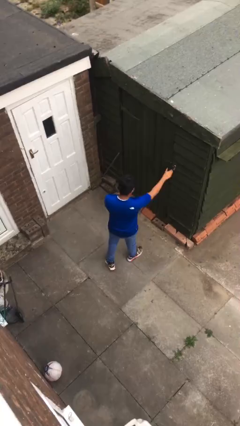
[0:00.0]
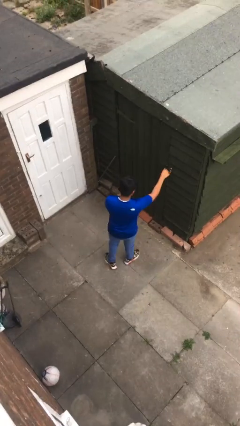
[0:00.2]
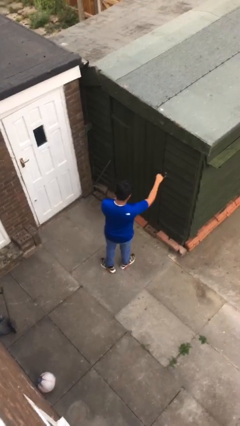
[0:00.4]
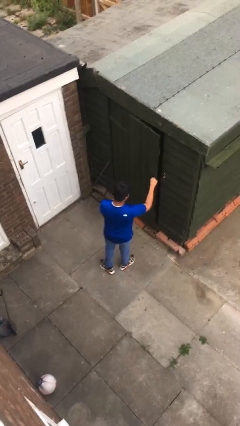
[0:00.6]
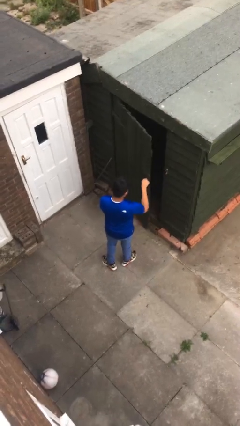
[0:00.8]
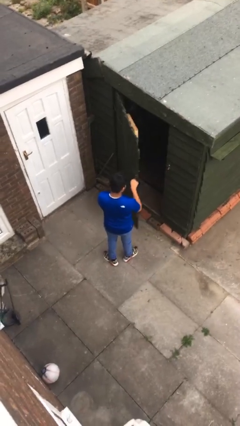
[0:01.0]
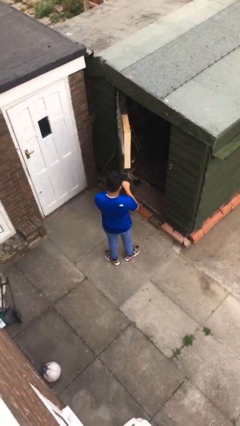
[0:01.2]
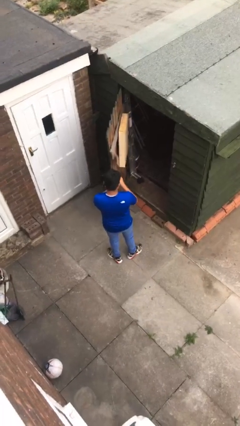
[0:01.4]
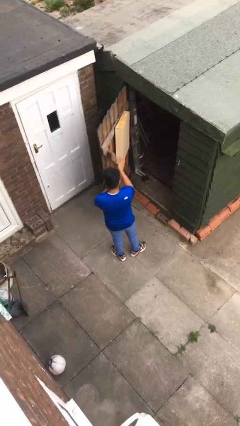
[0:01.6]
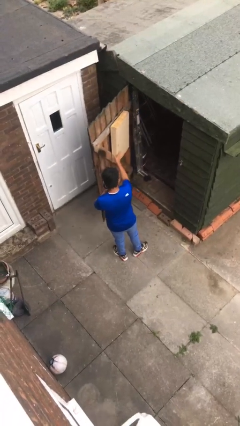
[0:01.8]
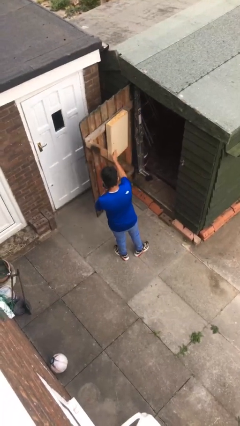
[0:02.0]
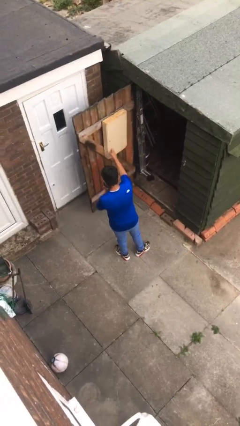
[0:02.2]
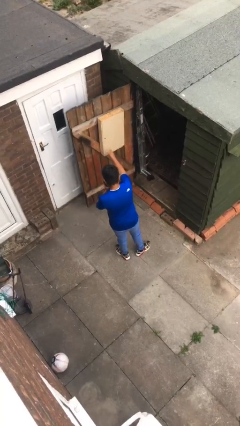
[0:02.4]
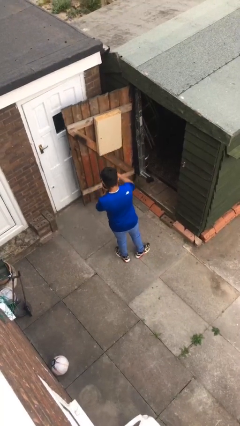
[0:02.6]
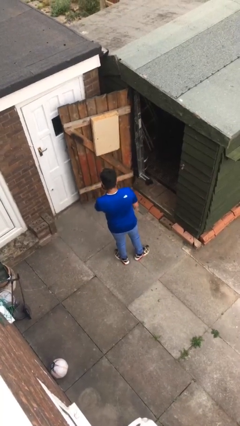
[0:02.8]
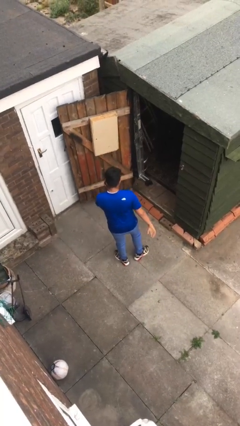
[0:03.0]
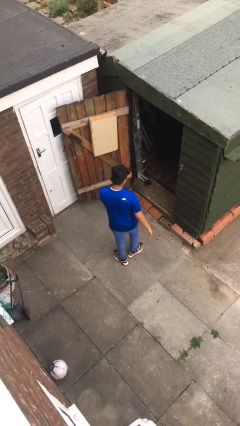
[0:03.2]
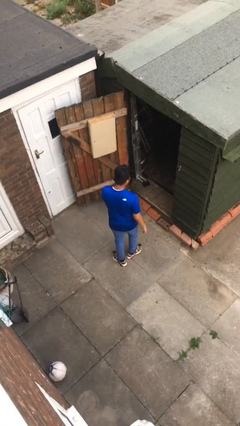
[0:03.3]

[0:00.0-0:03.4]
person opens facility door

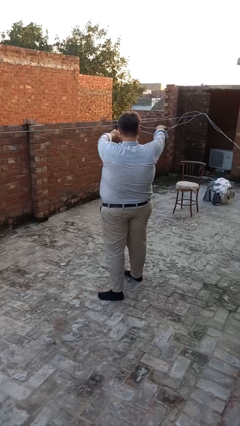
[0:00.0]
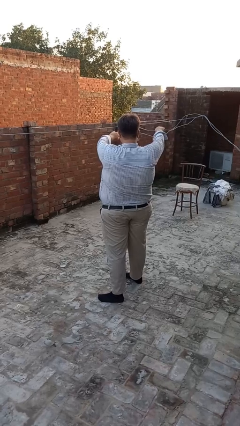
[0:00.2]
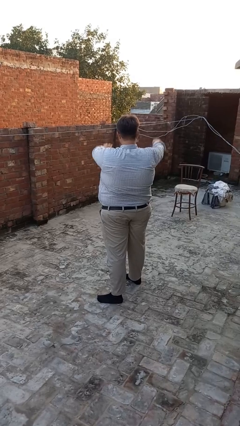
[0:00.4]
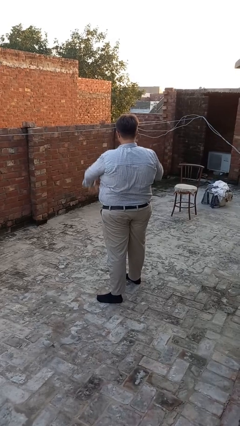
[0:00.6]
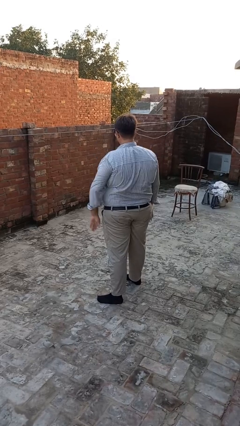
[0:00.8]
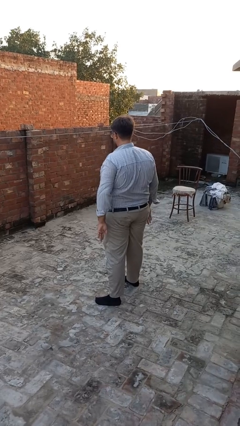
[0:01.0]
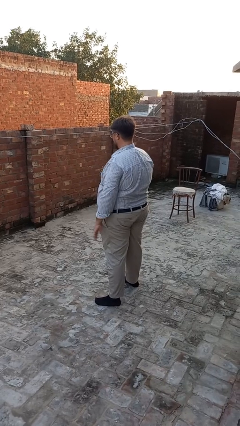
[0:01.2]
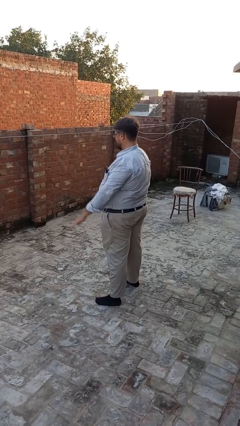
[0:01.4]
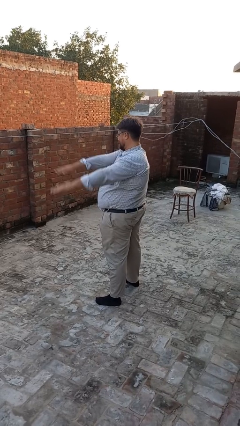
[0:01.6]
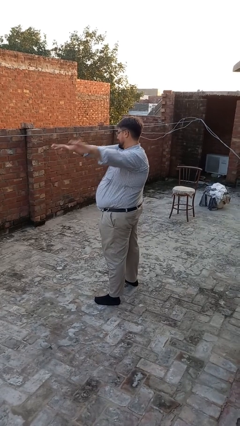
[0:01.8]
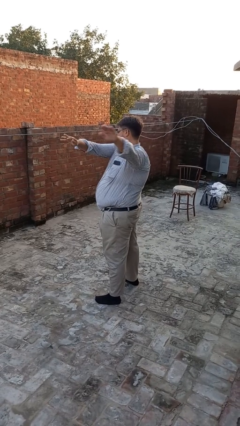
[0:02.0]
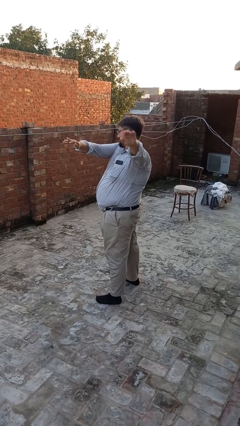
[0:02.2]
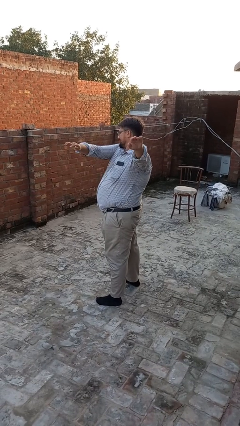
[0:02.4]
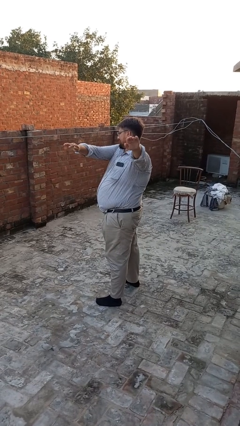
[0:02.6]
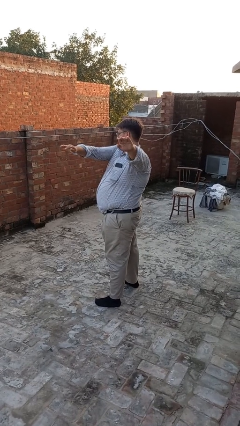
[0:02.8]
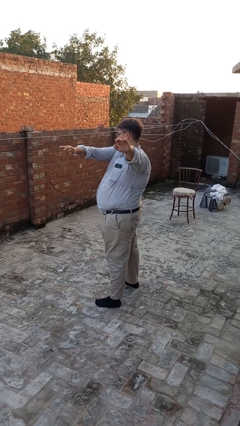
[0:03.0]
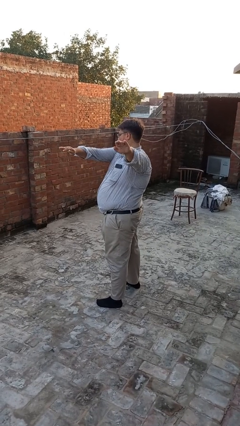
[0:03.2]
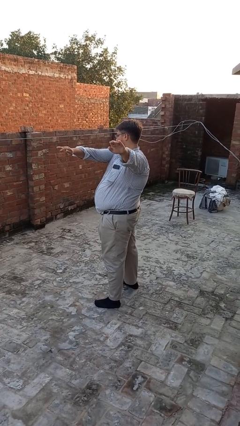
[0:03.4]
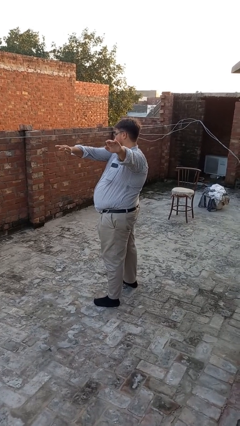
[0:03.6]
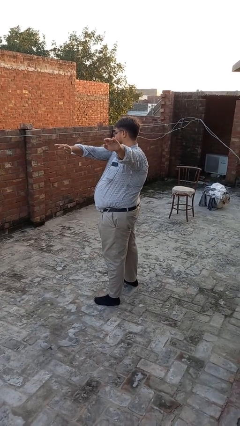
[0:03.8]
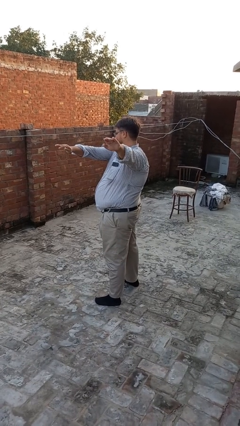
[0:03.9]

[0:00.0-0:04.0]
person gestures swipe left

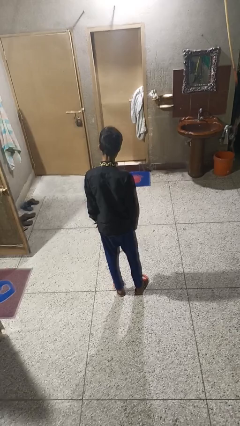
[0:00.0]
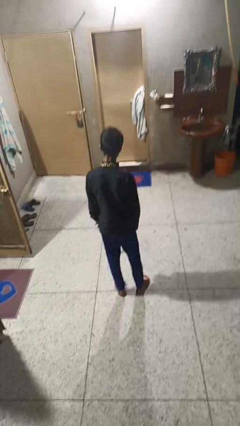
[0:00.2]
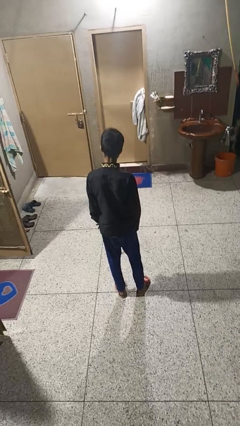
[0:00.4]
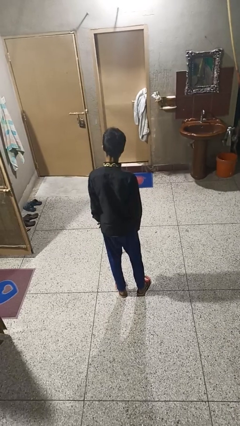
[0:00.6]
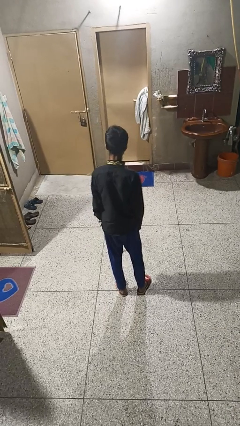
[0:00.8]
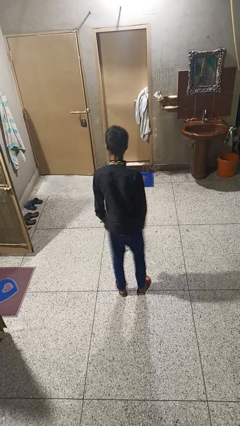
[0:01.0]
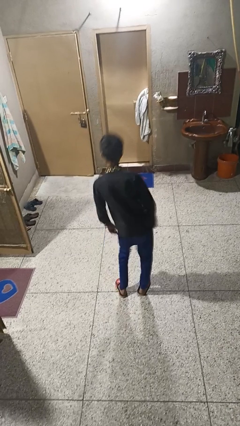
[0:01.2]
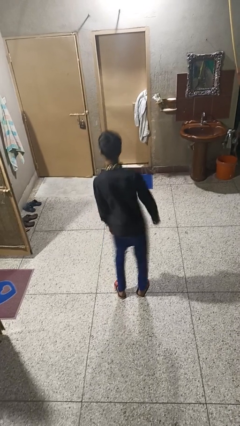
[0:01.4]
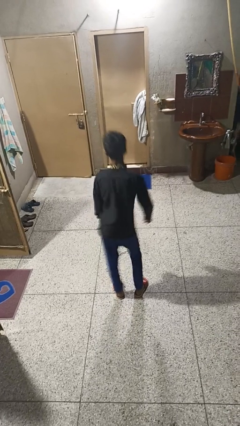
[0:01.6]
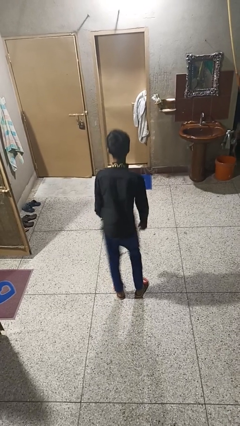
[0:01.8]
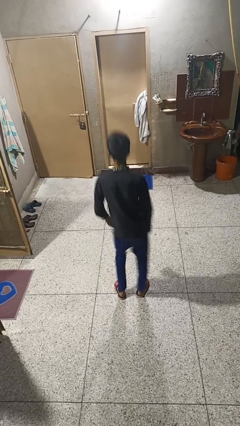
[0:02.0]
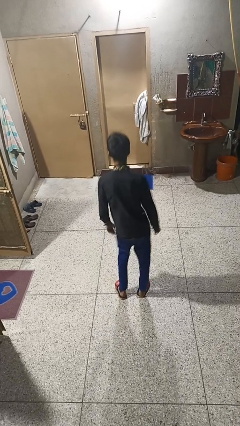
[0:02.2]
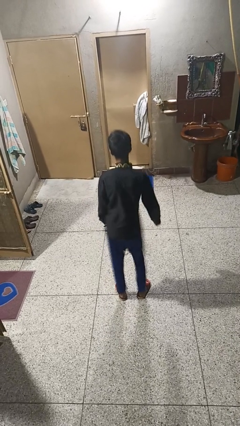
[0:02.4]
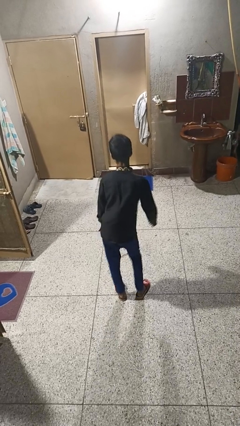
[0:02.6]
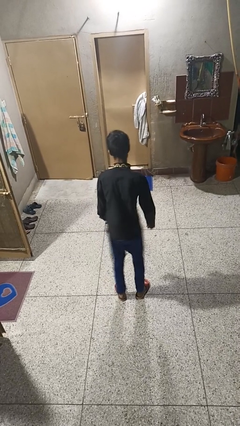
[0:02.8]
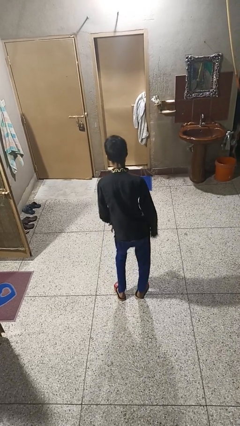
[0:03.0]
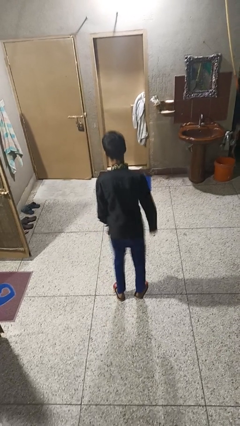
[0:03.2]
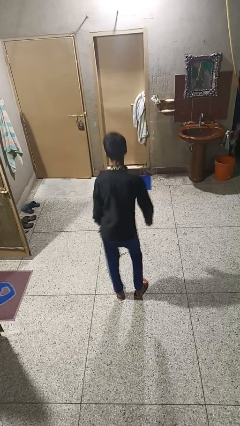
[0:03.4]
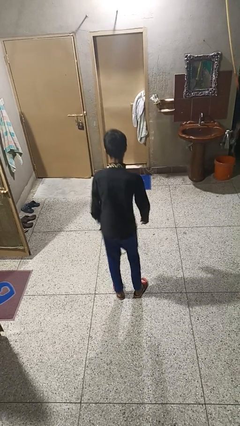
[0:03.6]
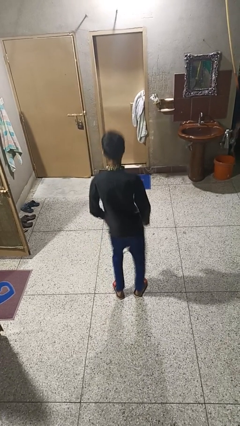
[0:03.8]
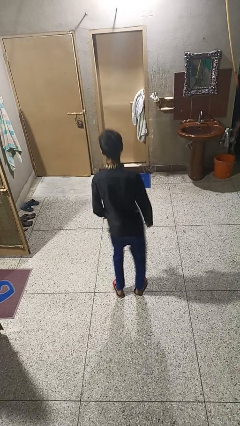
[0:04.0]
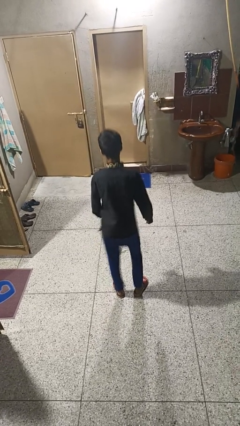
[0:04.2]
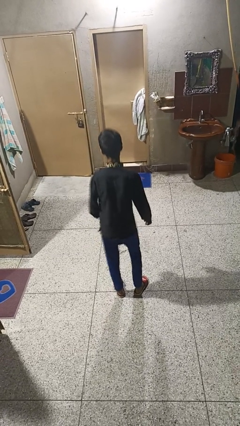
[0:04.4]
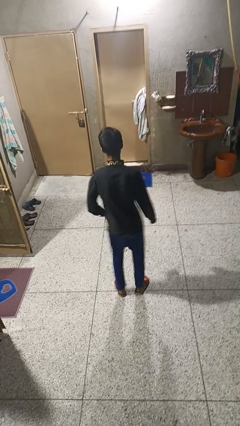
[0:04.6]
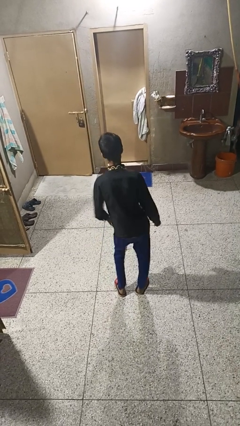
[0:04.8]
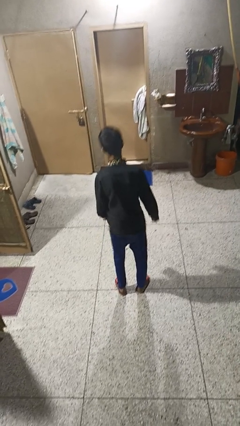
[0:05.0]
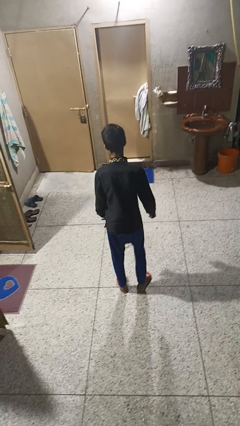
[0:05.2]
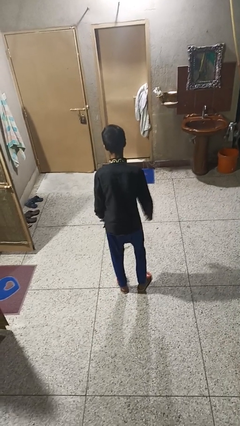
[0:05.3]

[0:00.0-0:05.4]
person wiggles hips

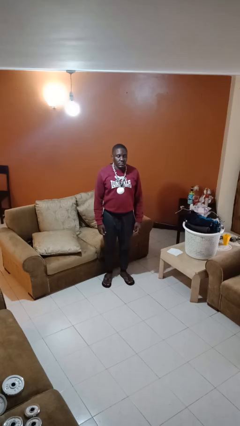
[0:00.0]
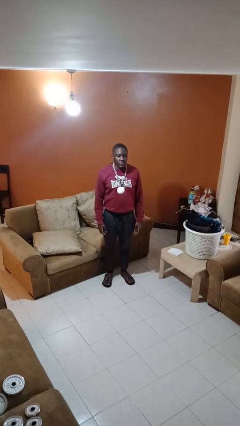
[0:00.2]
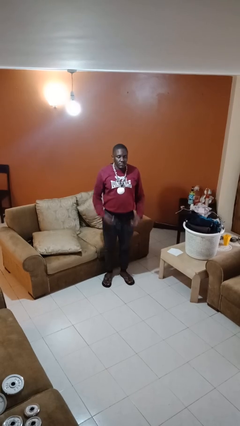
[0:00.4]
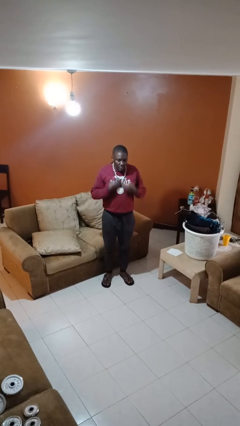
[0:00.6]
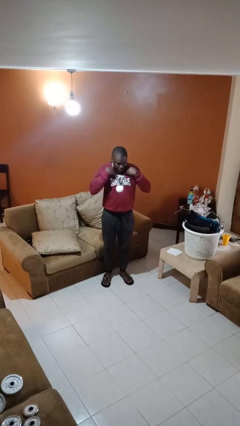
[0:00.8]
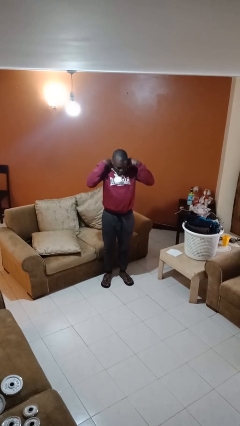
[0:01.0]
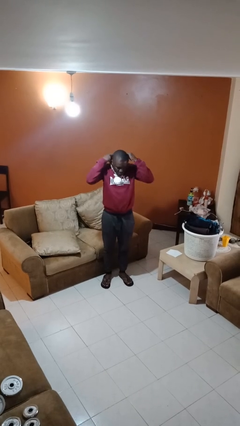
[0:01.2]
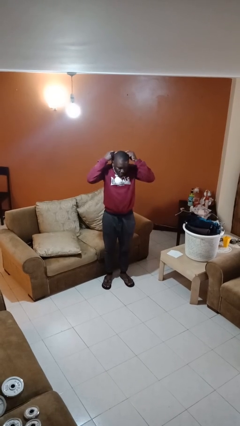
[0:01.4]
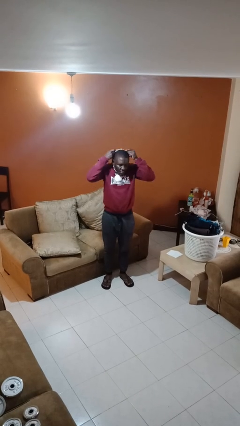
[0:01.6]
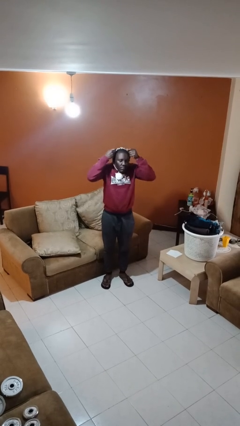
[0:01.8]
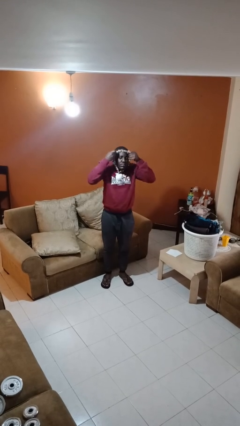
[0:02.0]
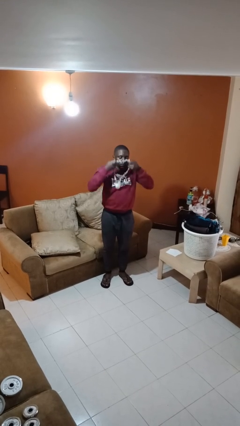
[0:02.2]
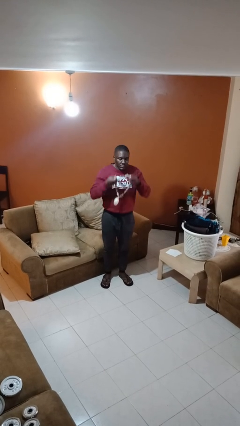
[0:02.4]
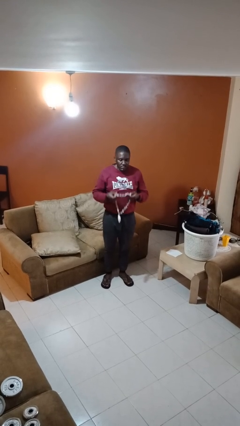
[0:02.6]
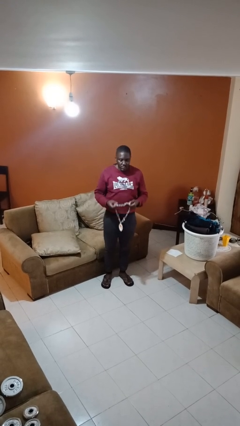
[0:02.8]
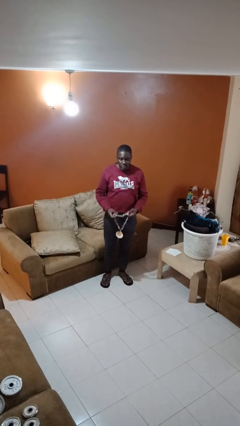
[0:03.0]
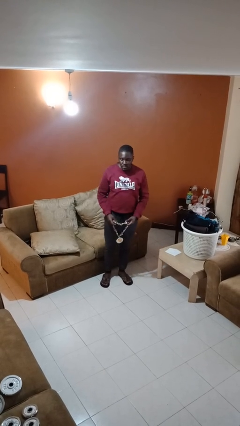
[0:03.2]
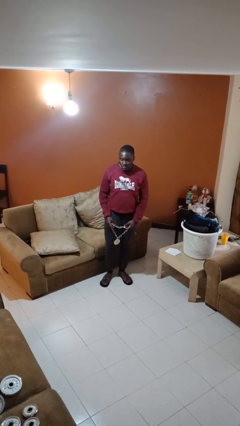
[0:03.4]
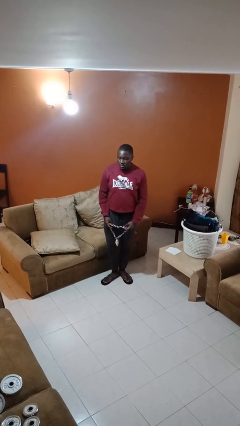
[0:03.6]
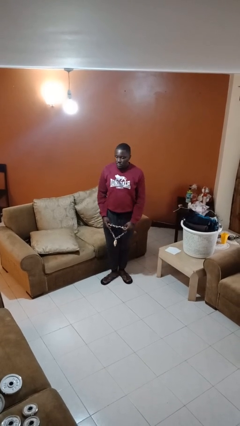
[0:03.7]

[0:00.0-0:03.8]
person takes off necklace

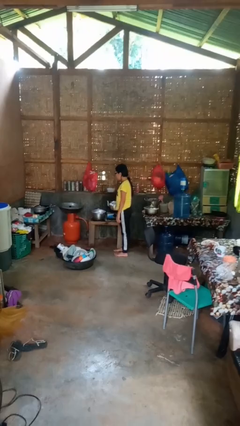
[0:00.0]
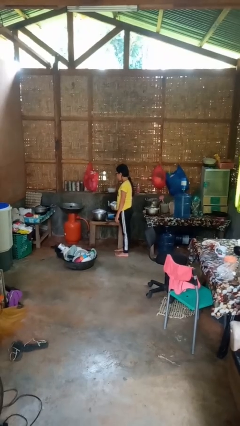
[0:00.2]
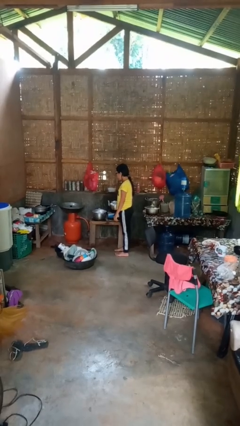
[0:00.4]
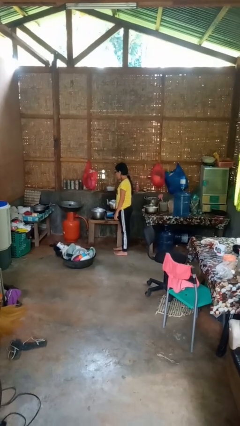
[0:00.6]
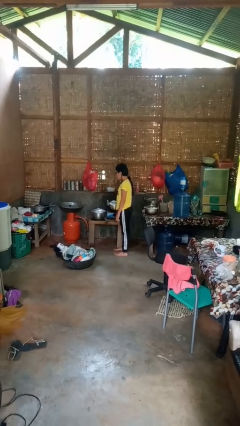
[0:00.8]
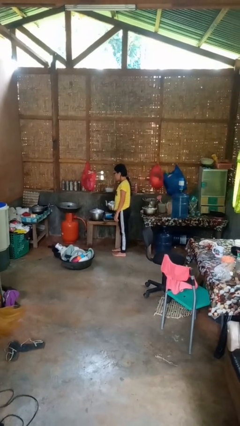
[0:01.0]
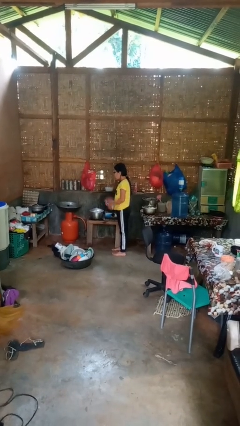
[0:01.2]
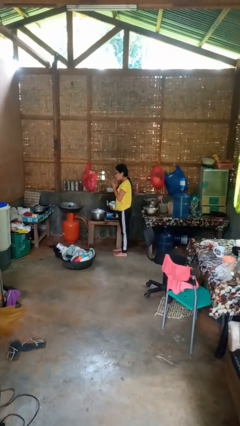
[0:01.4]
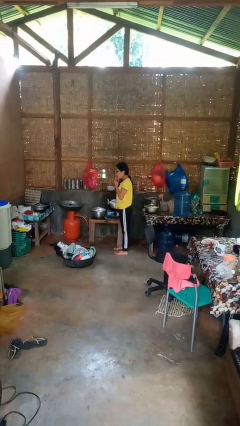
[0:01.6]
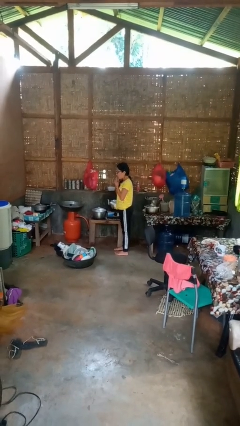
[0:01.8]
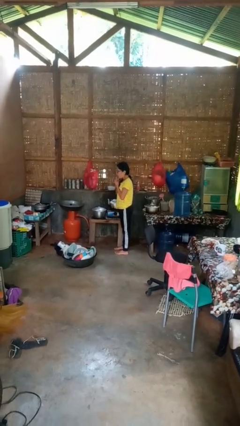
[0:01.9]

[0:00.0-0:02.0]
person burns hand
